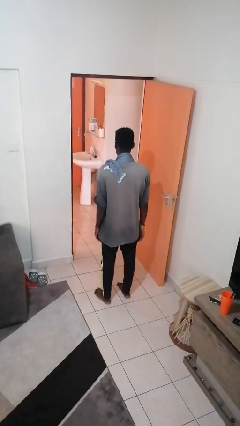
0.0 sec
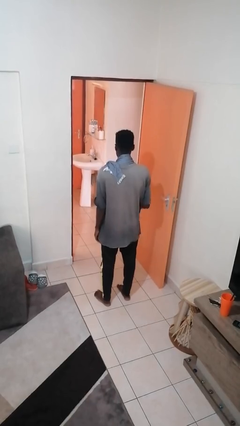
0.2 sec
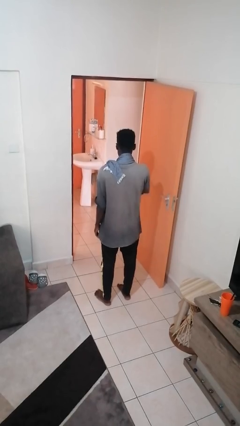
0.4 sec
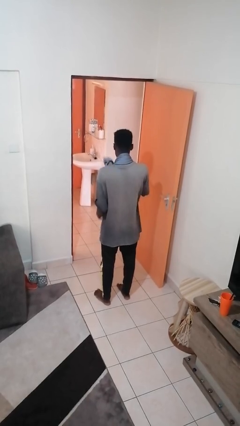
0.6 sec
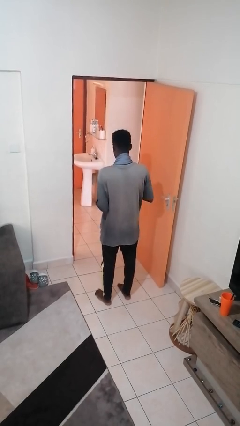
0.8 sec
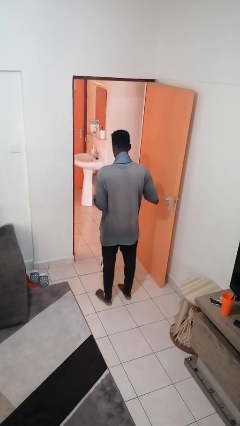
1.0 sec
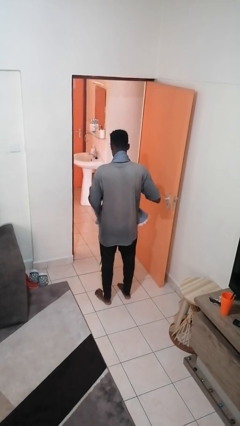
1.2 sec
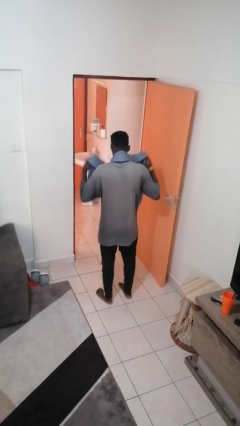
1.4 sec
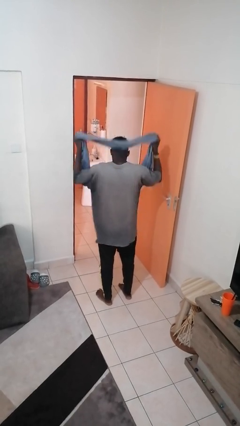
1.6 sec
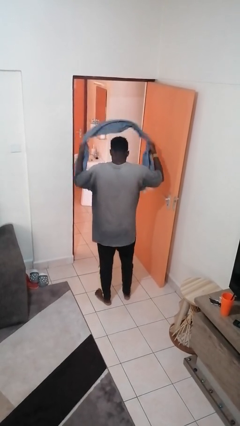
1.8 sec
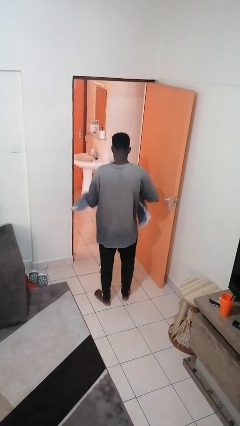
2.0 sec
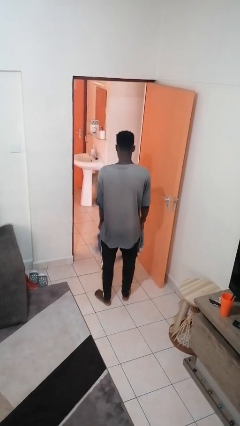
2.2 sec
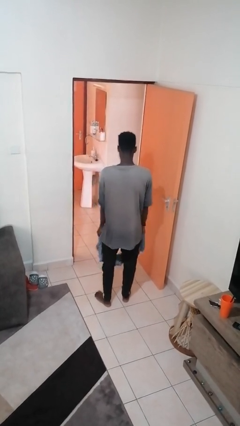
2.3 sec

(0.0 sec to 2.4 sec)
person takes off scarf

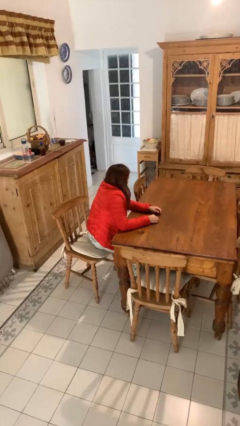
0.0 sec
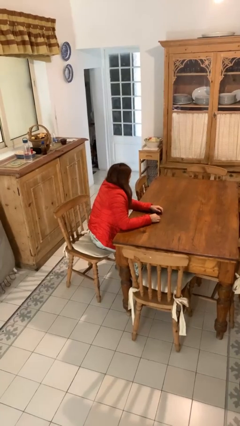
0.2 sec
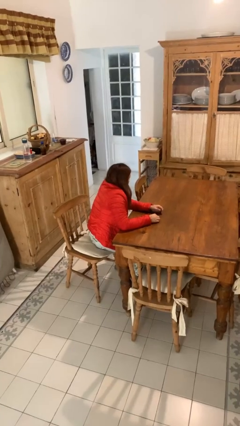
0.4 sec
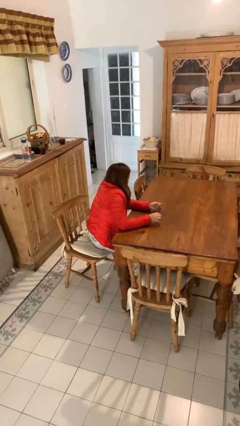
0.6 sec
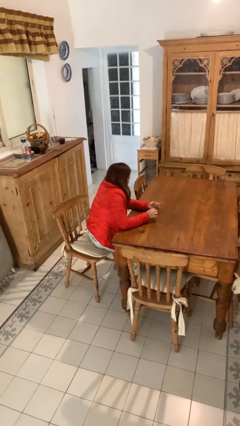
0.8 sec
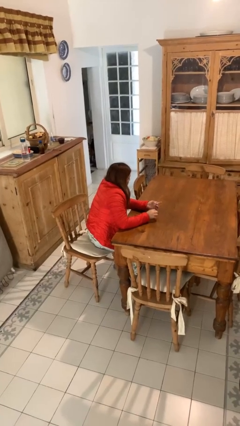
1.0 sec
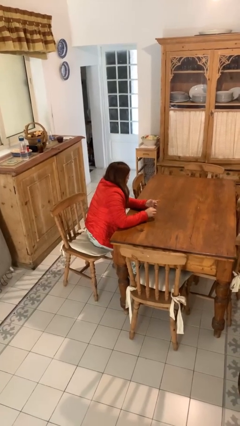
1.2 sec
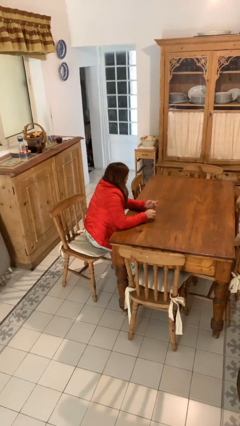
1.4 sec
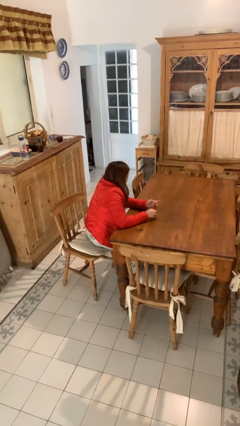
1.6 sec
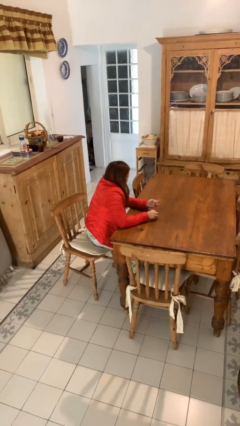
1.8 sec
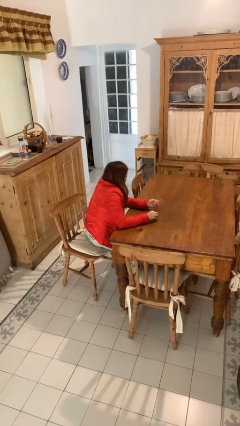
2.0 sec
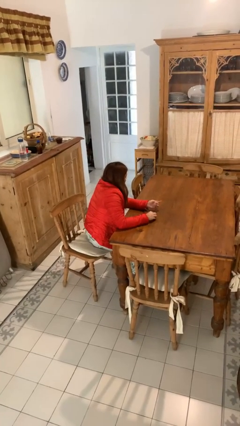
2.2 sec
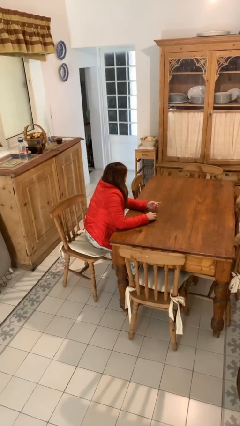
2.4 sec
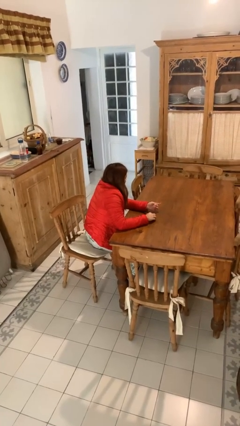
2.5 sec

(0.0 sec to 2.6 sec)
person files fingernails

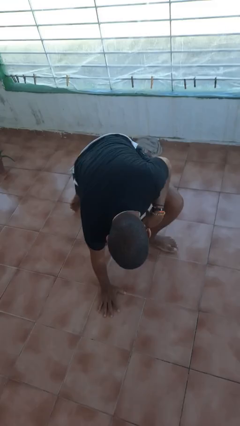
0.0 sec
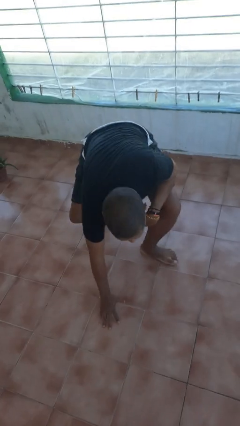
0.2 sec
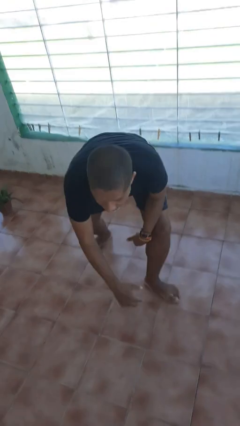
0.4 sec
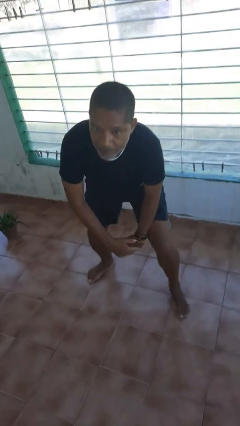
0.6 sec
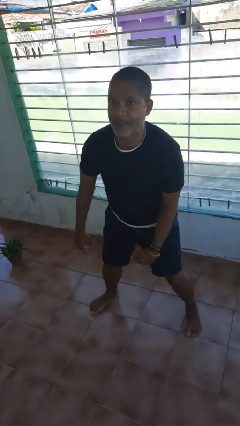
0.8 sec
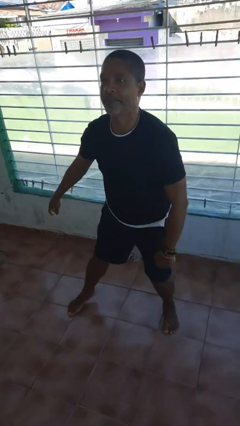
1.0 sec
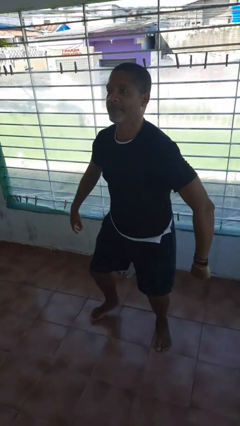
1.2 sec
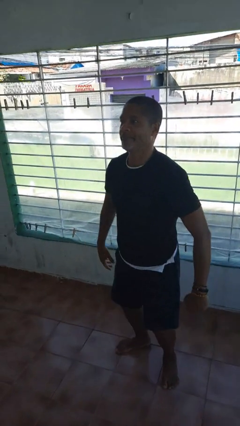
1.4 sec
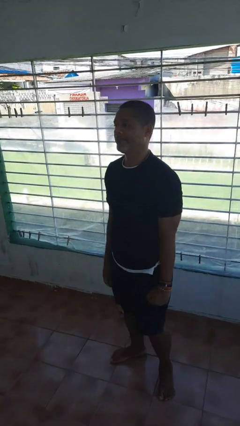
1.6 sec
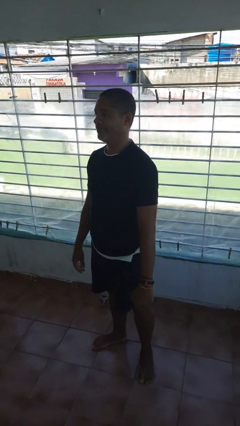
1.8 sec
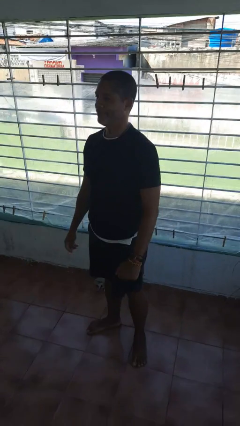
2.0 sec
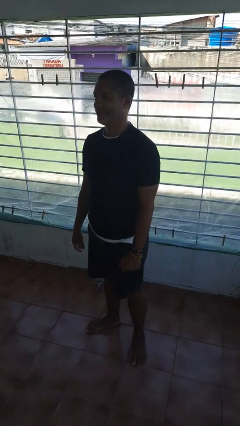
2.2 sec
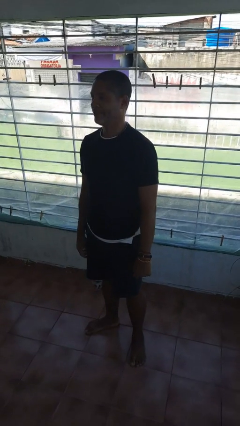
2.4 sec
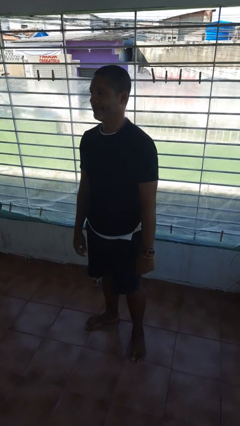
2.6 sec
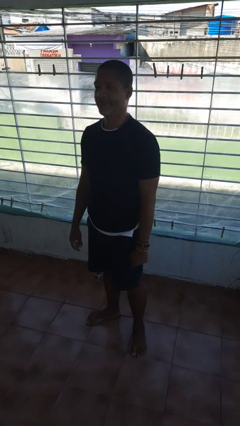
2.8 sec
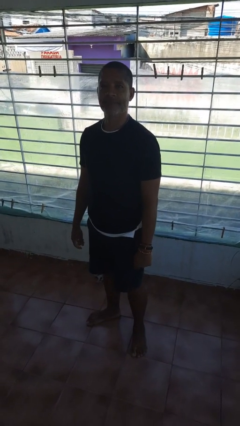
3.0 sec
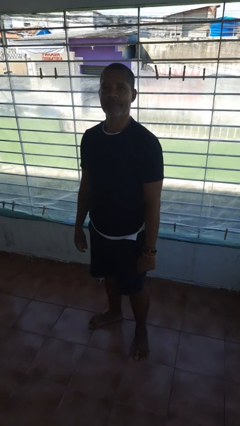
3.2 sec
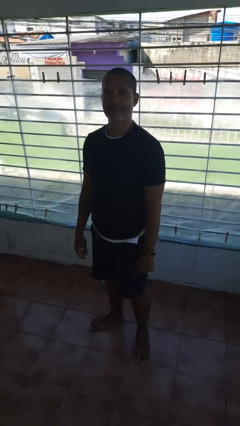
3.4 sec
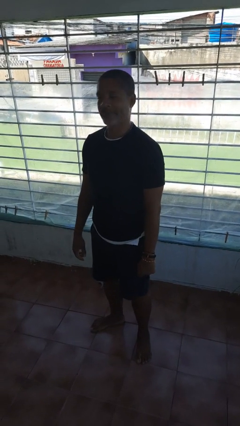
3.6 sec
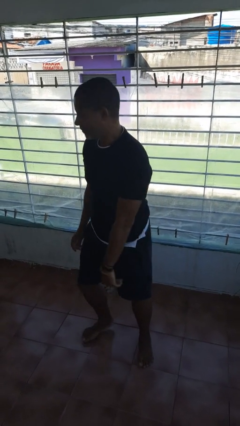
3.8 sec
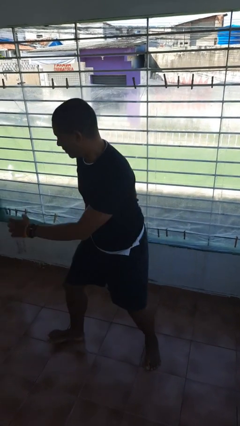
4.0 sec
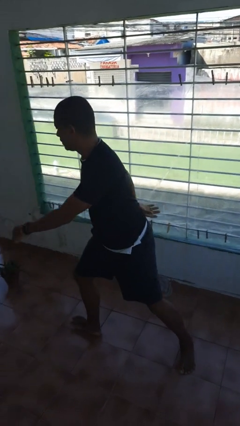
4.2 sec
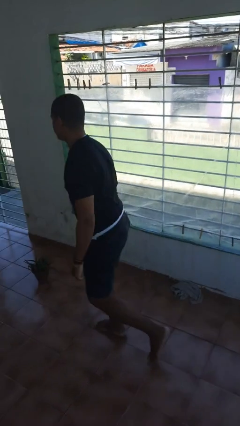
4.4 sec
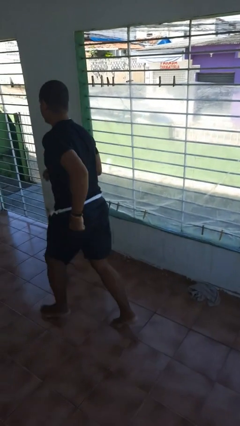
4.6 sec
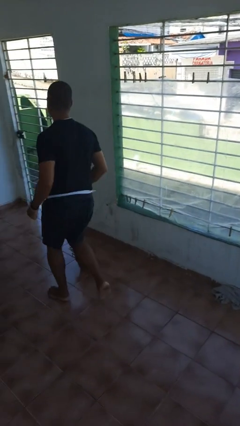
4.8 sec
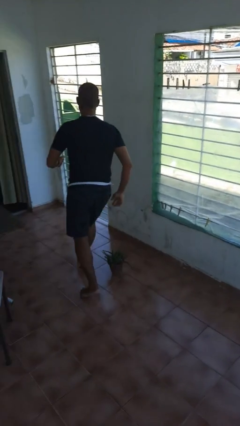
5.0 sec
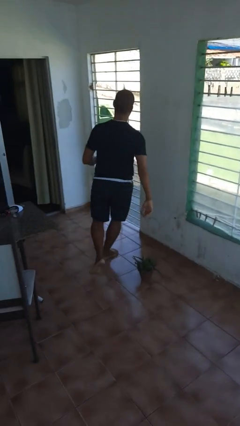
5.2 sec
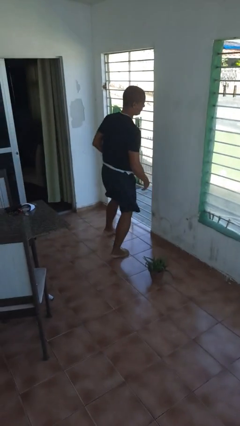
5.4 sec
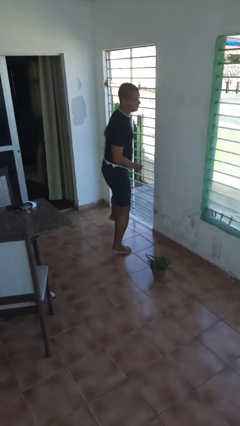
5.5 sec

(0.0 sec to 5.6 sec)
person stands up from floor

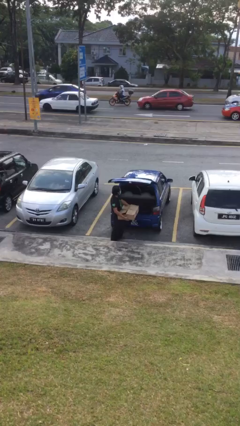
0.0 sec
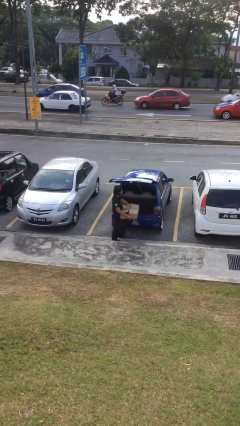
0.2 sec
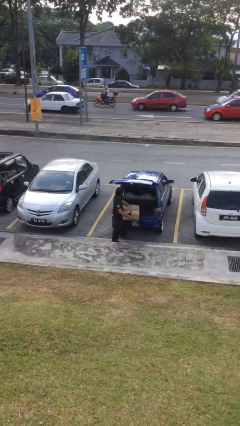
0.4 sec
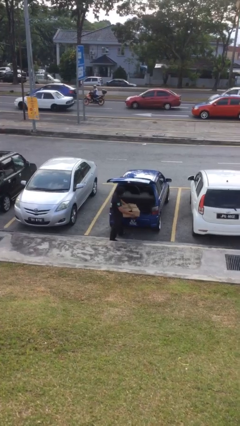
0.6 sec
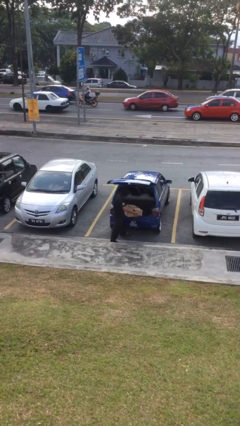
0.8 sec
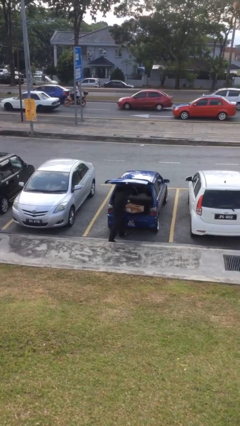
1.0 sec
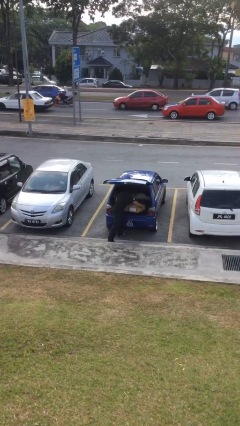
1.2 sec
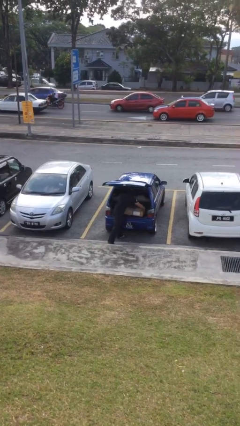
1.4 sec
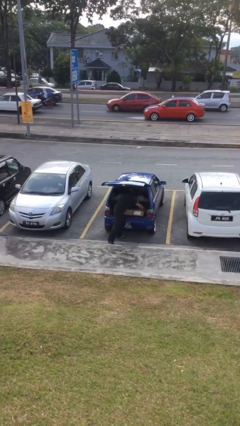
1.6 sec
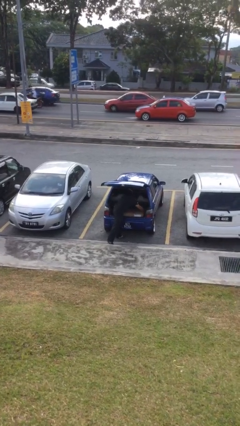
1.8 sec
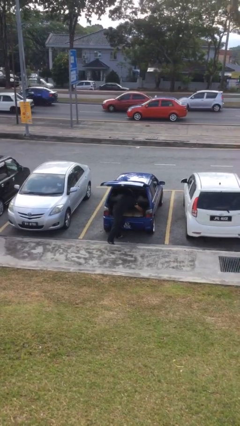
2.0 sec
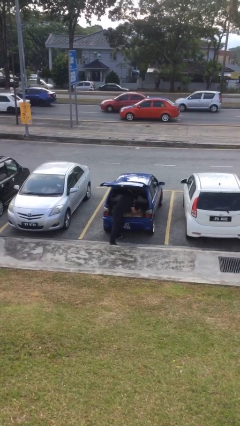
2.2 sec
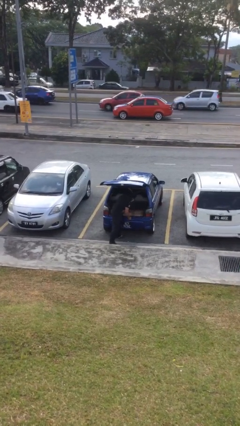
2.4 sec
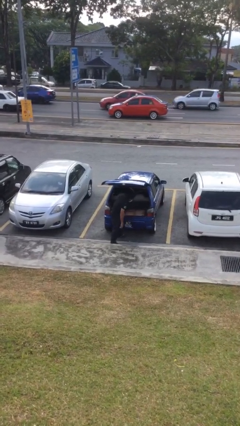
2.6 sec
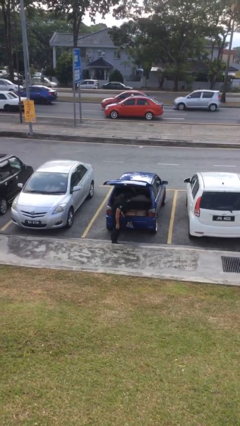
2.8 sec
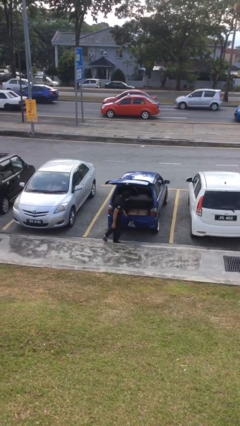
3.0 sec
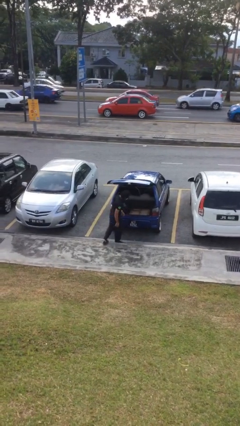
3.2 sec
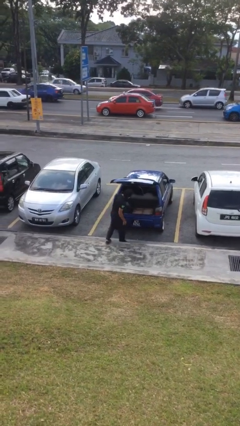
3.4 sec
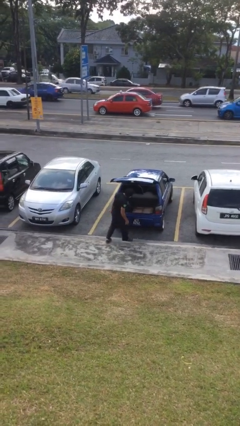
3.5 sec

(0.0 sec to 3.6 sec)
person loads car

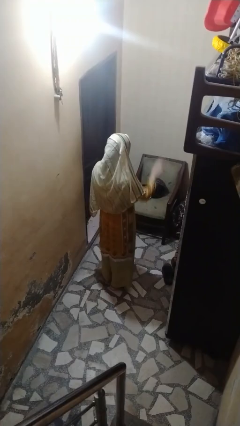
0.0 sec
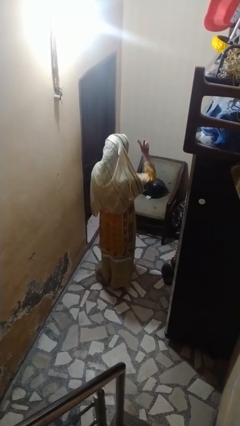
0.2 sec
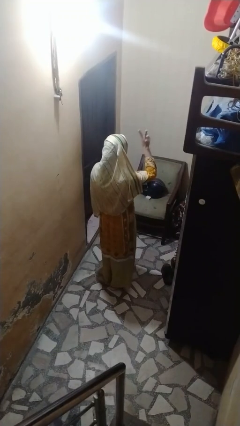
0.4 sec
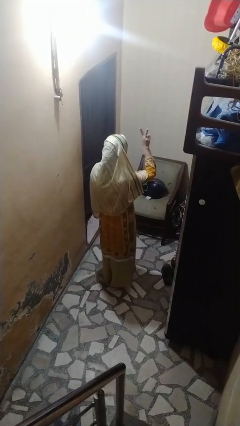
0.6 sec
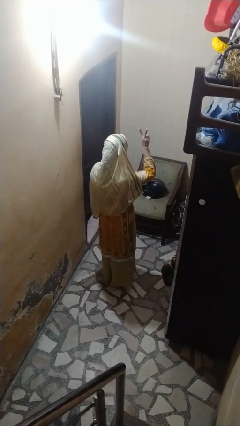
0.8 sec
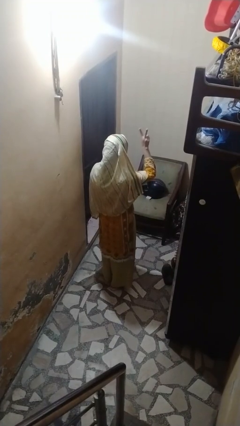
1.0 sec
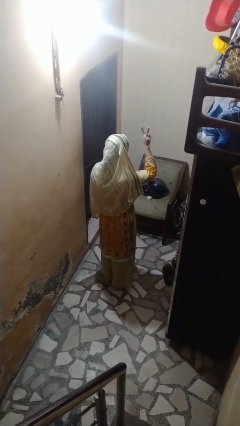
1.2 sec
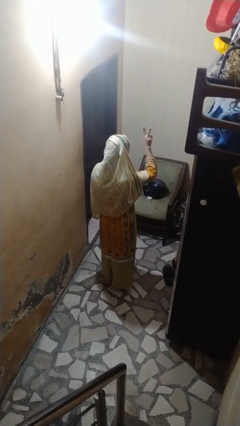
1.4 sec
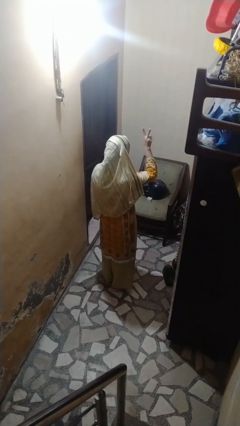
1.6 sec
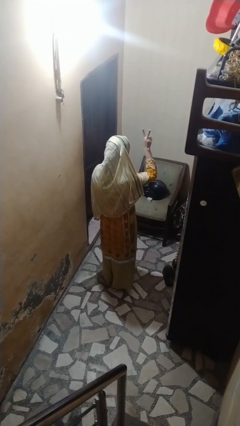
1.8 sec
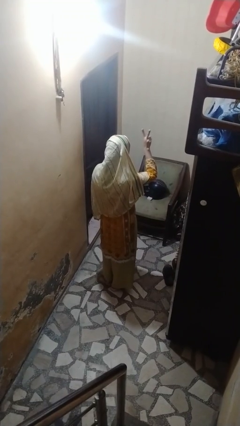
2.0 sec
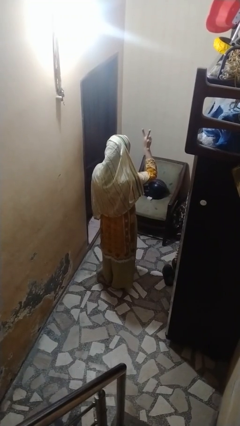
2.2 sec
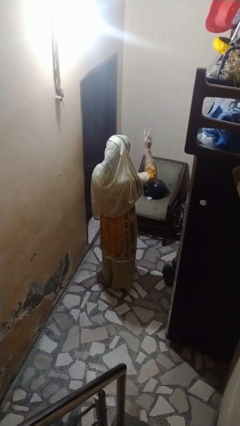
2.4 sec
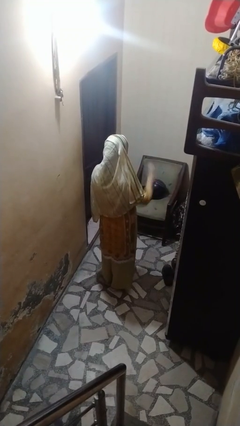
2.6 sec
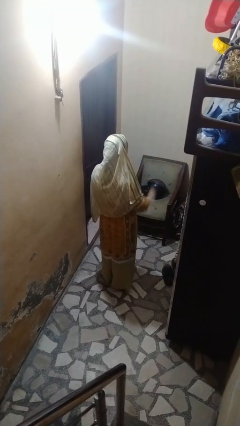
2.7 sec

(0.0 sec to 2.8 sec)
person gestures peace

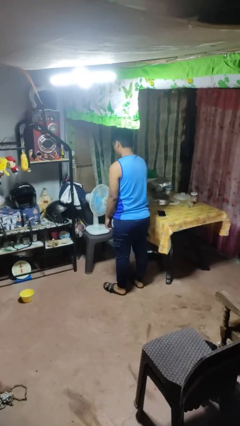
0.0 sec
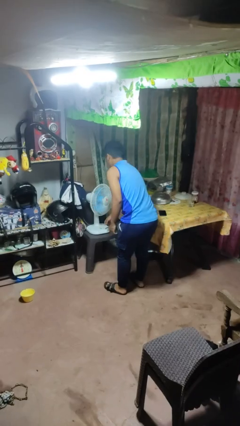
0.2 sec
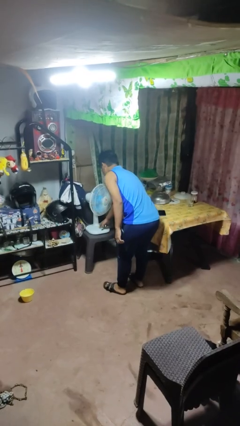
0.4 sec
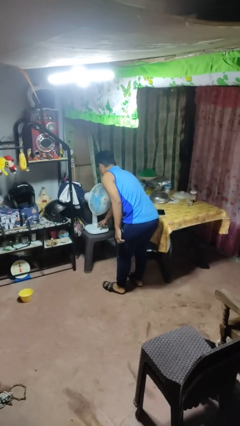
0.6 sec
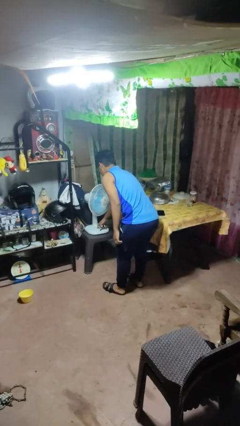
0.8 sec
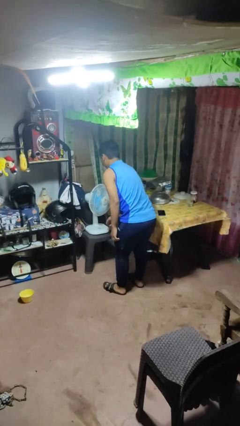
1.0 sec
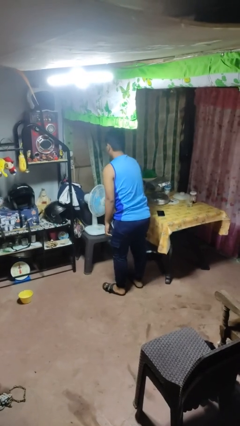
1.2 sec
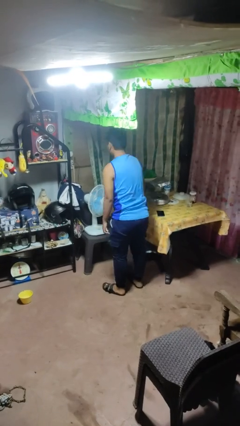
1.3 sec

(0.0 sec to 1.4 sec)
person turns on fan
